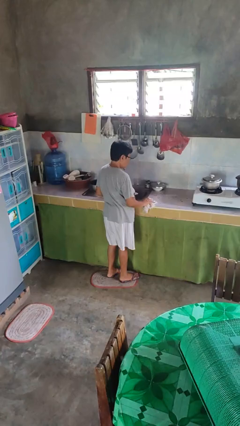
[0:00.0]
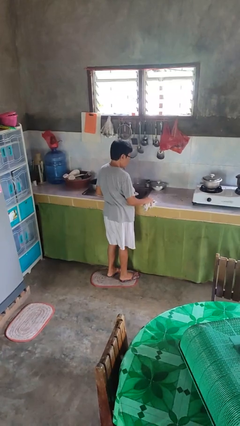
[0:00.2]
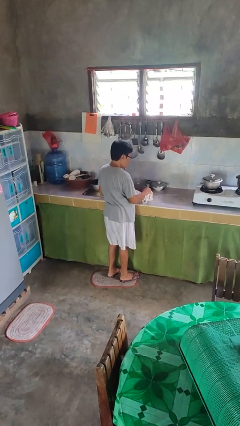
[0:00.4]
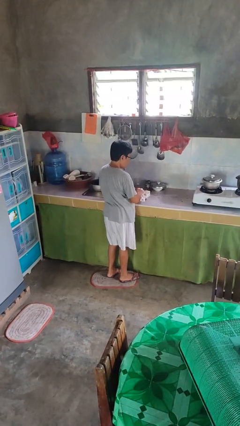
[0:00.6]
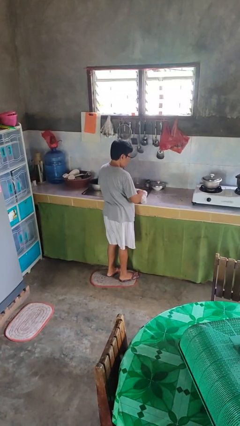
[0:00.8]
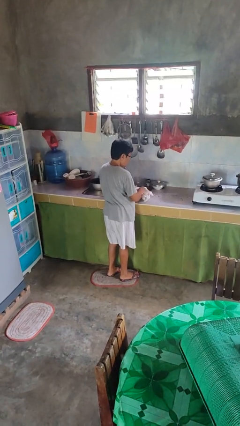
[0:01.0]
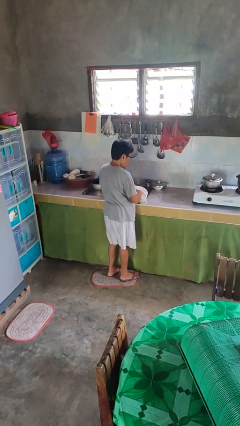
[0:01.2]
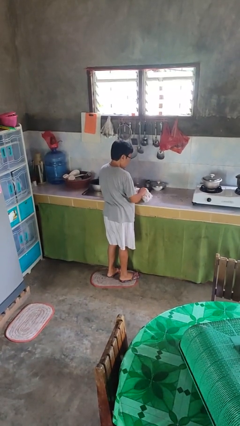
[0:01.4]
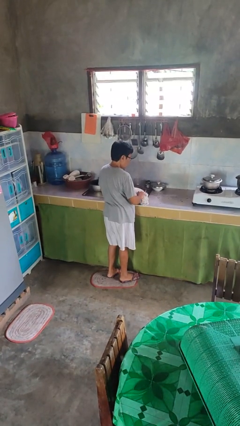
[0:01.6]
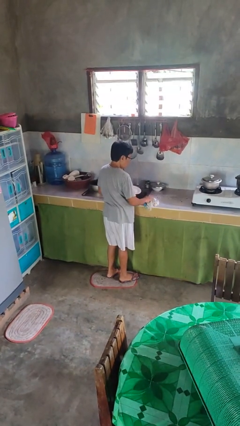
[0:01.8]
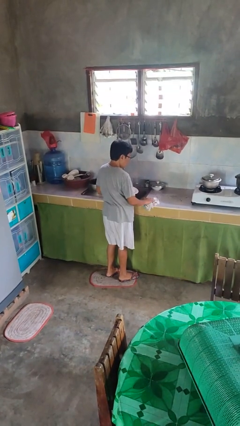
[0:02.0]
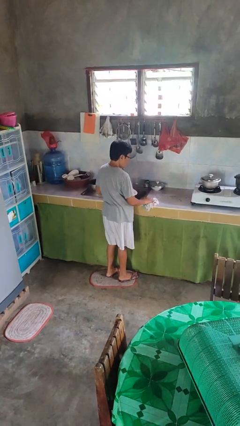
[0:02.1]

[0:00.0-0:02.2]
person dries dish

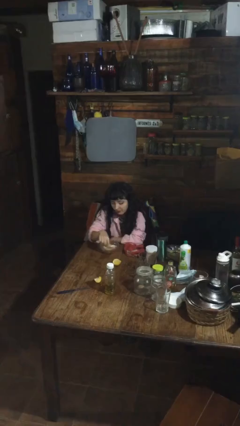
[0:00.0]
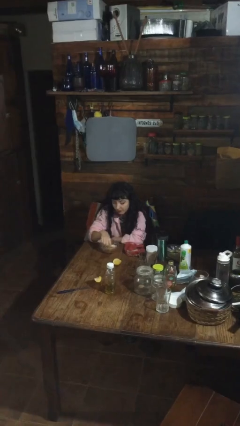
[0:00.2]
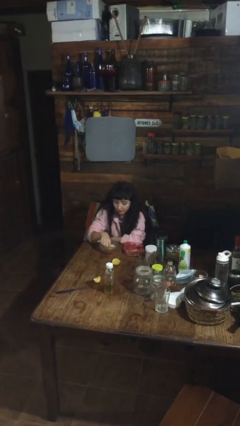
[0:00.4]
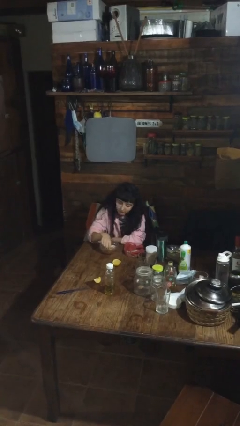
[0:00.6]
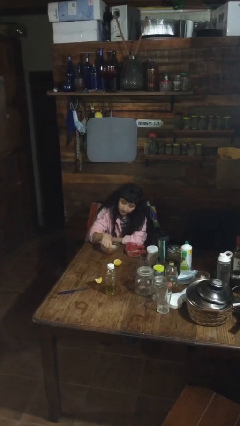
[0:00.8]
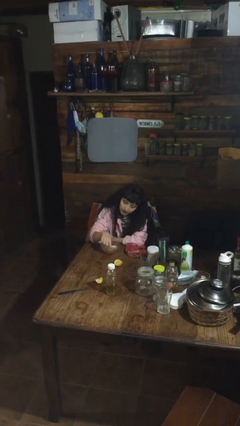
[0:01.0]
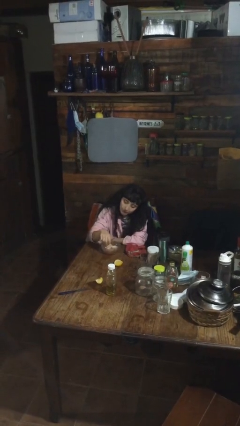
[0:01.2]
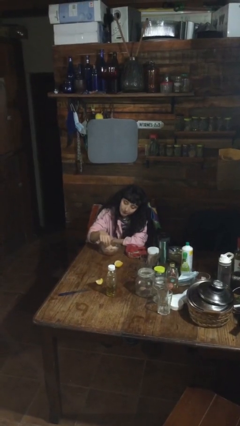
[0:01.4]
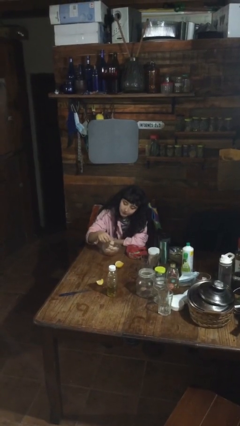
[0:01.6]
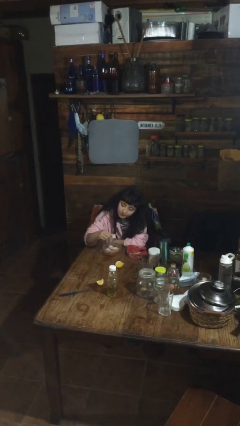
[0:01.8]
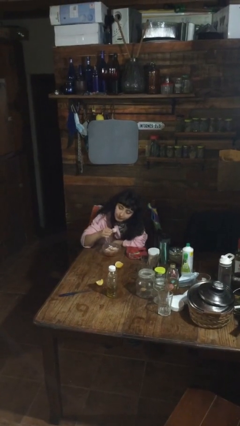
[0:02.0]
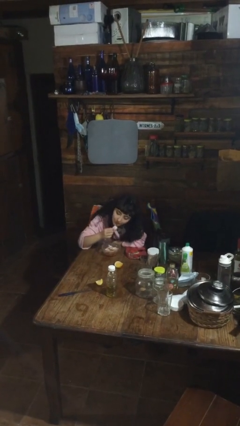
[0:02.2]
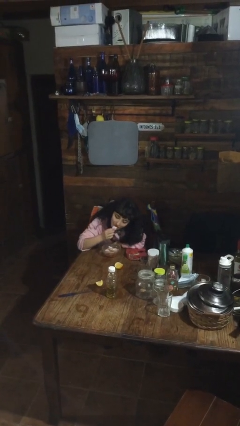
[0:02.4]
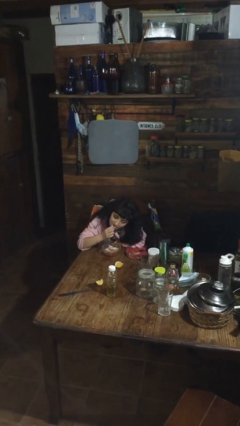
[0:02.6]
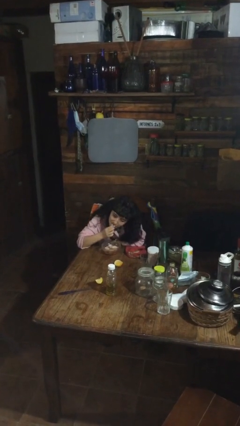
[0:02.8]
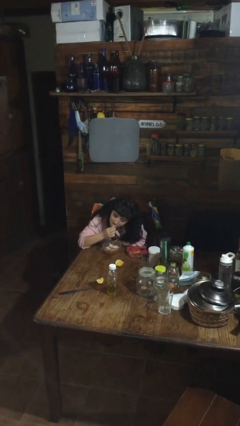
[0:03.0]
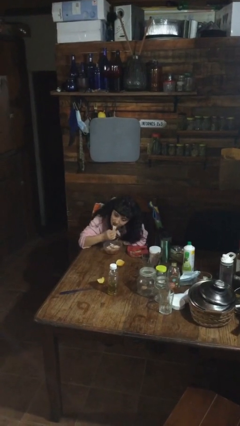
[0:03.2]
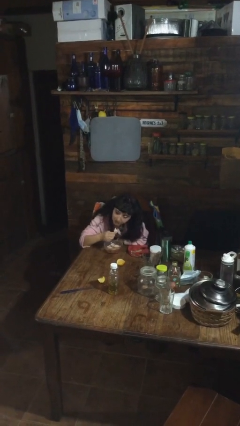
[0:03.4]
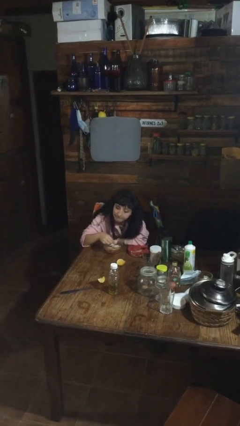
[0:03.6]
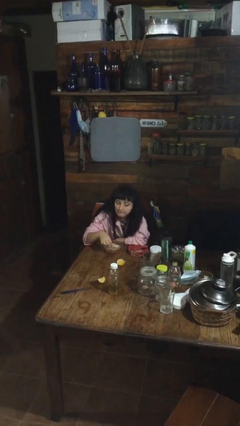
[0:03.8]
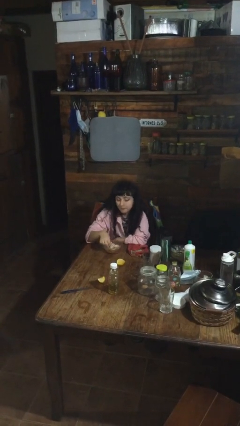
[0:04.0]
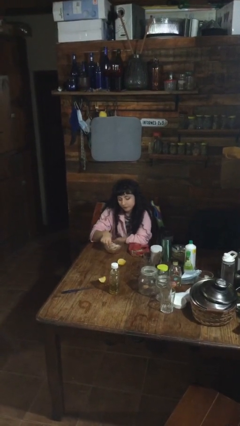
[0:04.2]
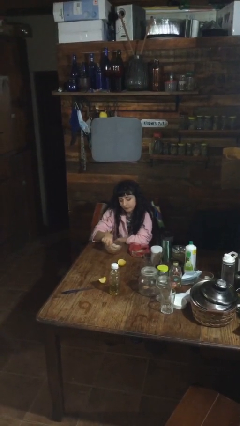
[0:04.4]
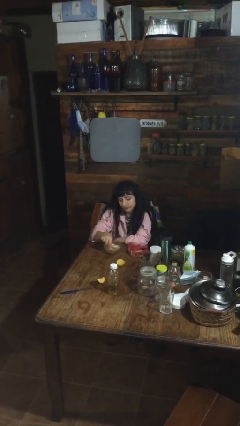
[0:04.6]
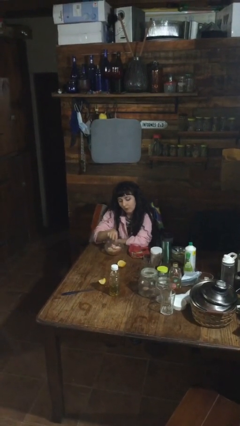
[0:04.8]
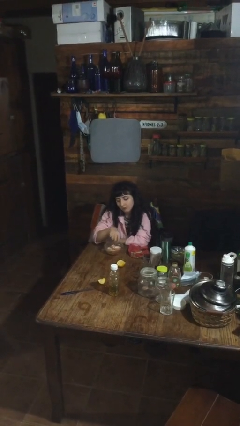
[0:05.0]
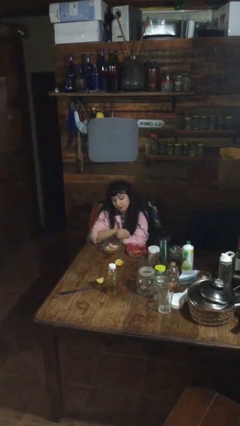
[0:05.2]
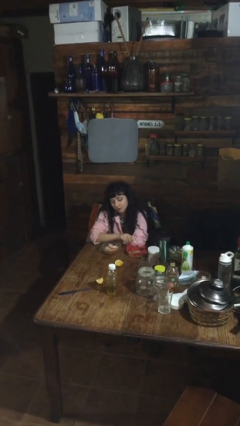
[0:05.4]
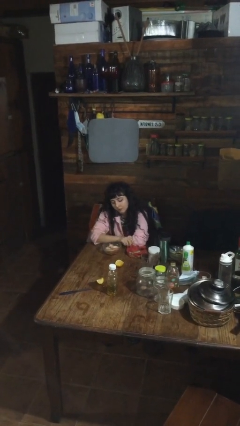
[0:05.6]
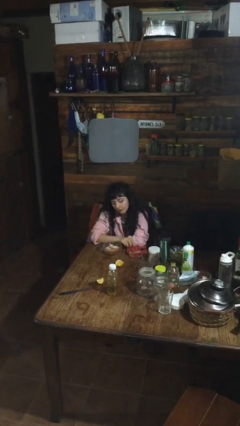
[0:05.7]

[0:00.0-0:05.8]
person eats with hands

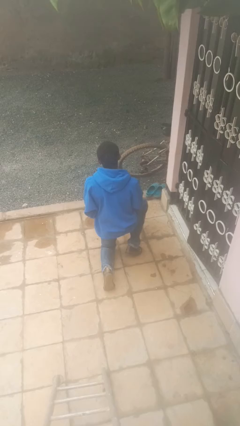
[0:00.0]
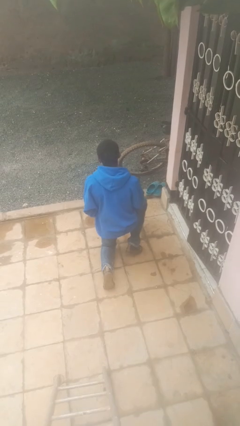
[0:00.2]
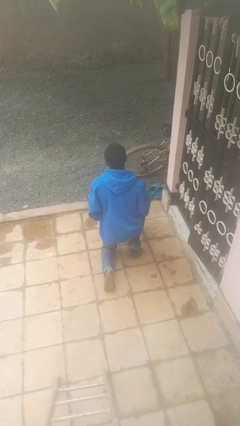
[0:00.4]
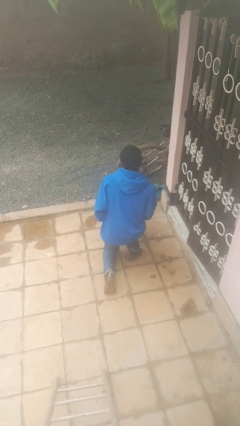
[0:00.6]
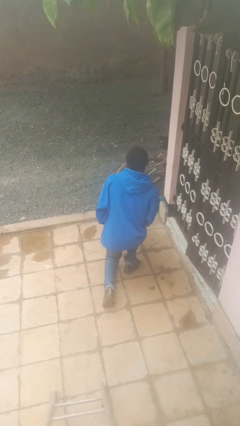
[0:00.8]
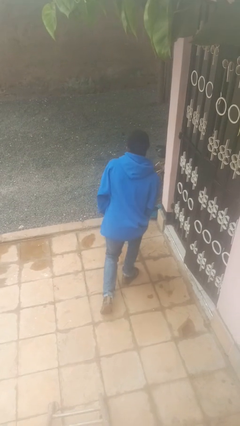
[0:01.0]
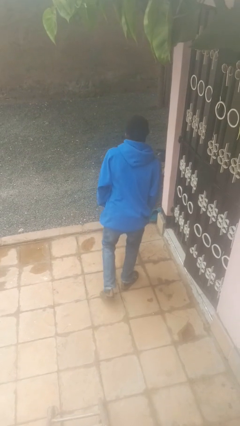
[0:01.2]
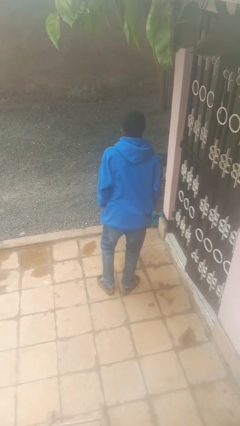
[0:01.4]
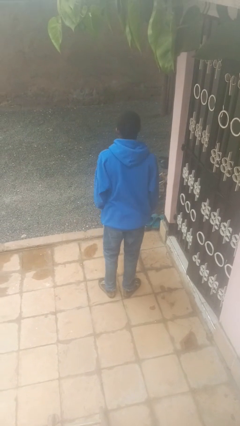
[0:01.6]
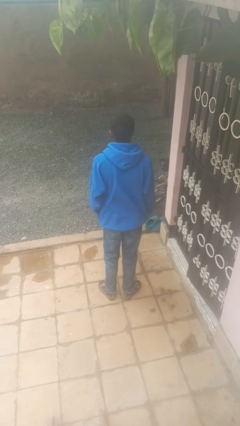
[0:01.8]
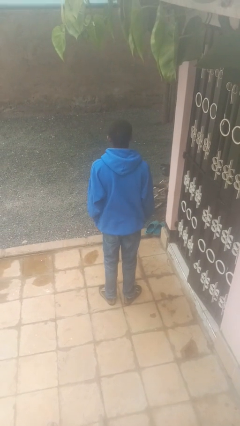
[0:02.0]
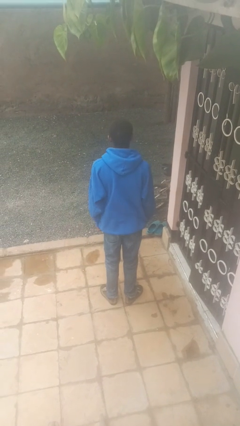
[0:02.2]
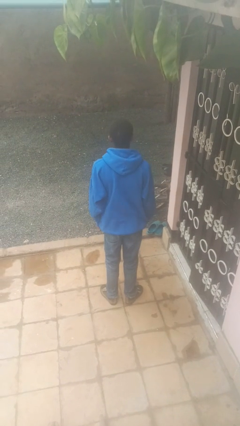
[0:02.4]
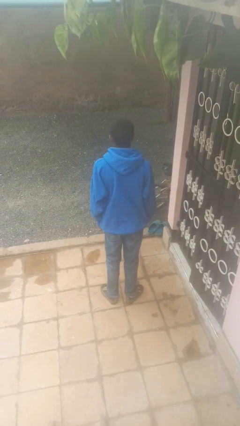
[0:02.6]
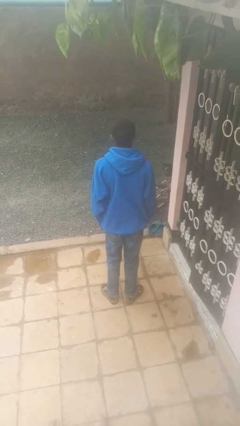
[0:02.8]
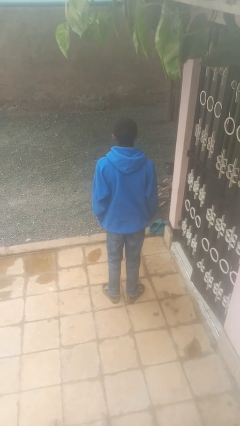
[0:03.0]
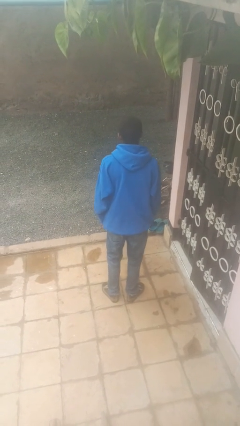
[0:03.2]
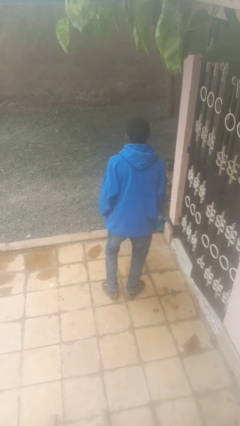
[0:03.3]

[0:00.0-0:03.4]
person stands up from floor

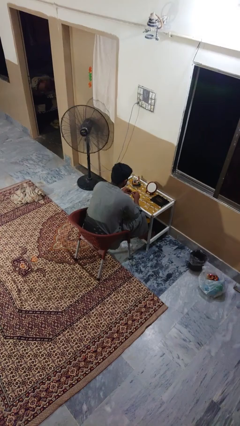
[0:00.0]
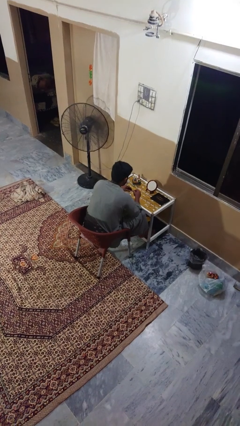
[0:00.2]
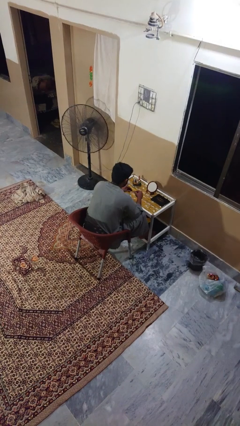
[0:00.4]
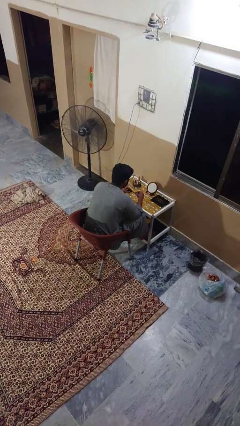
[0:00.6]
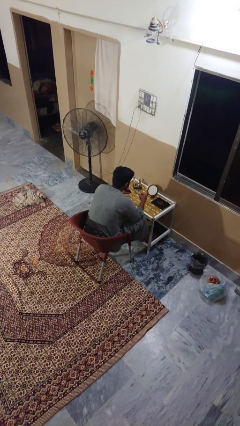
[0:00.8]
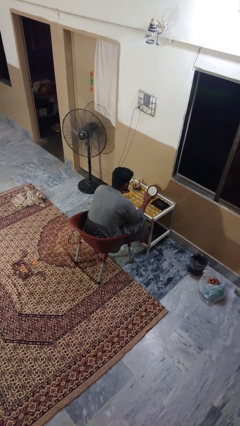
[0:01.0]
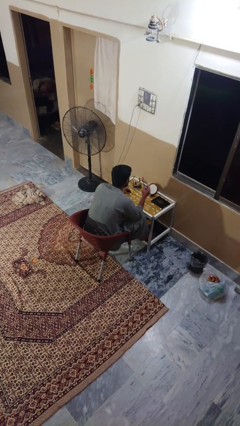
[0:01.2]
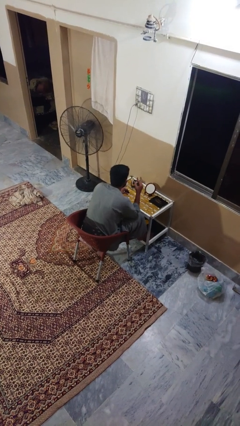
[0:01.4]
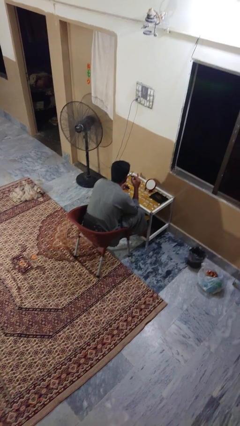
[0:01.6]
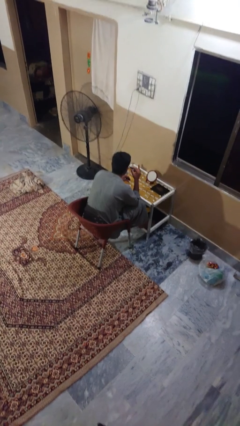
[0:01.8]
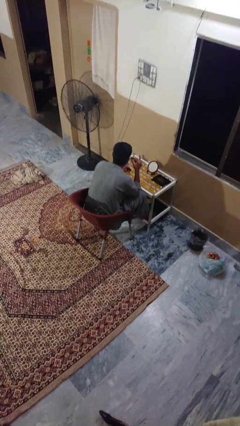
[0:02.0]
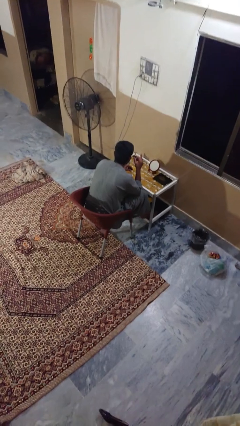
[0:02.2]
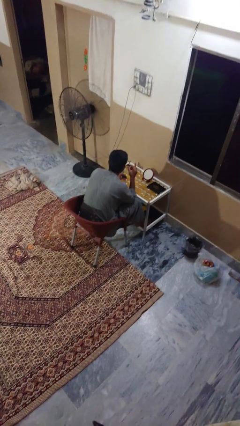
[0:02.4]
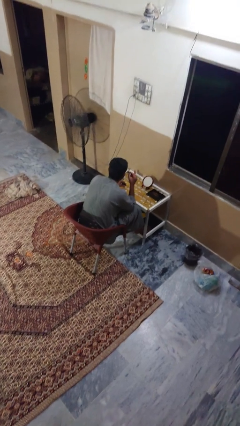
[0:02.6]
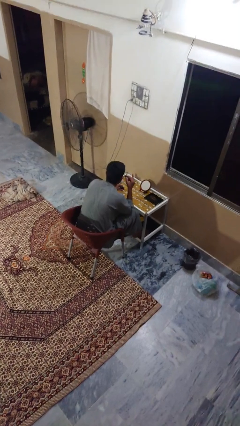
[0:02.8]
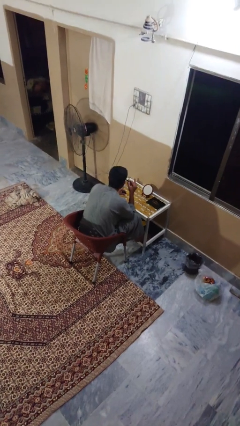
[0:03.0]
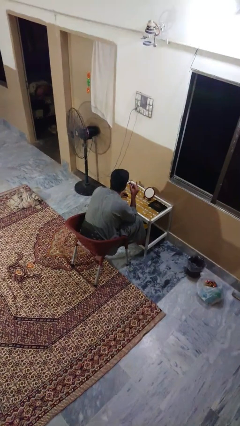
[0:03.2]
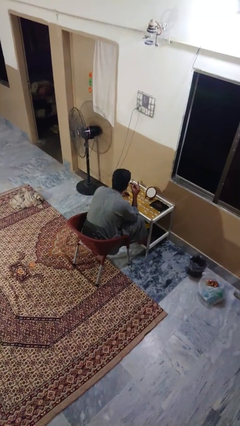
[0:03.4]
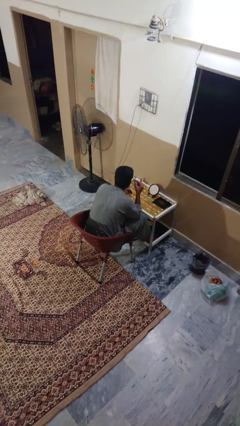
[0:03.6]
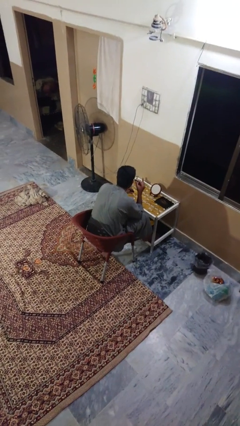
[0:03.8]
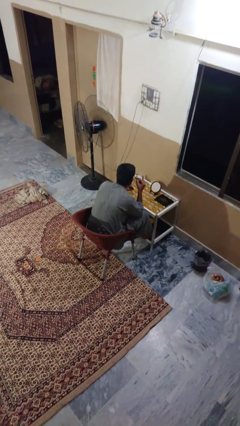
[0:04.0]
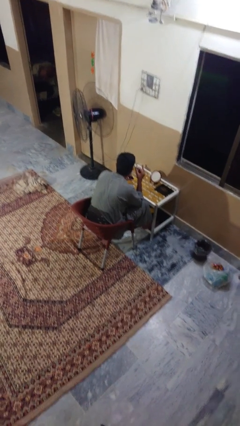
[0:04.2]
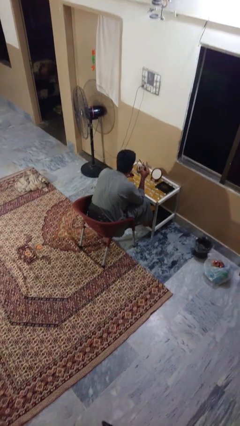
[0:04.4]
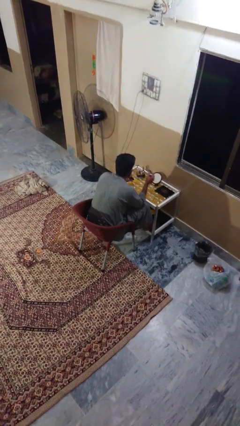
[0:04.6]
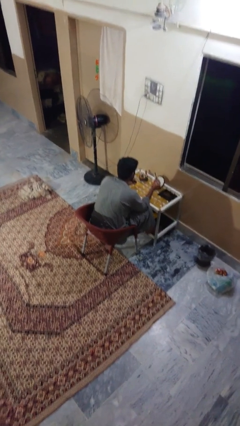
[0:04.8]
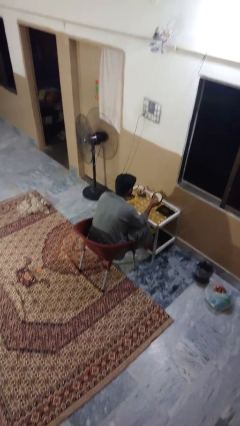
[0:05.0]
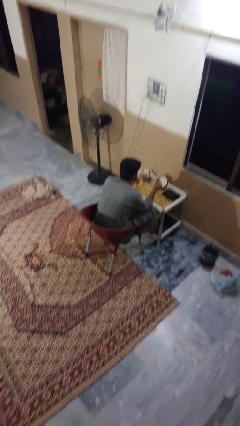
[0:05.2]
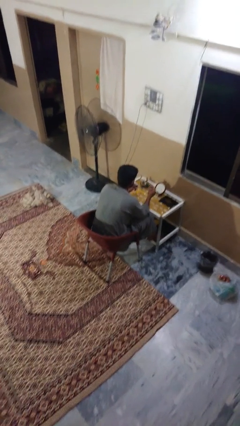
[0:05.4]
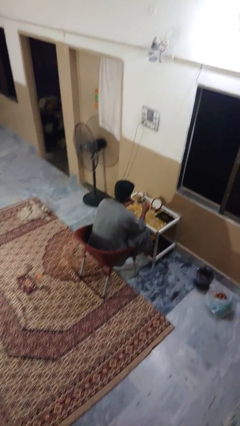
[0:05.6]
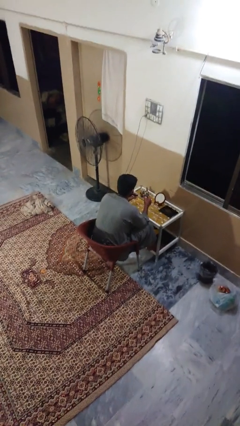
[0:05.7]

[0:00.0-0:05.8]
person applies eye makeup

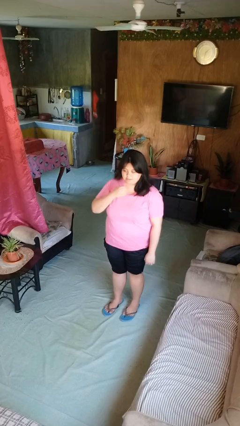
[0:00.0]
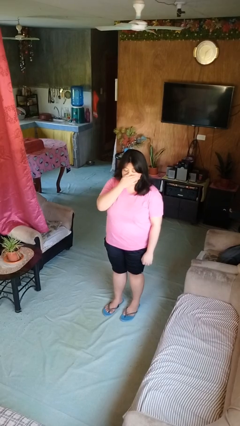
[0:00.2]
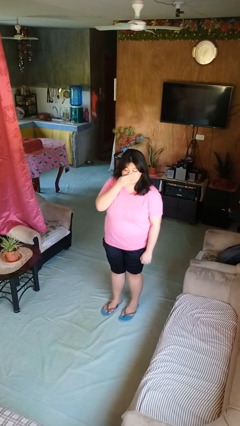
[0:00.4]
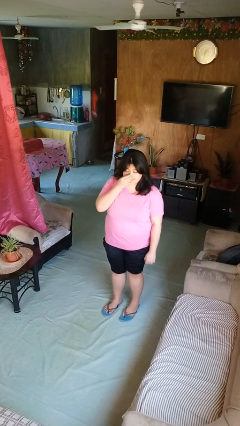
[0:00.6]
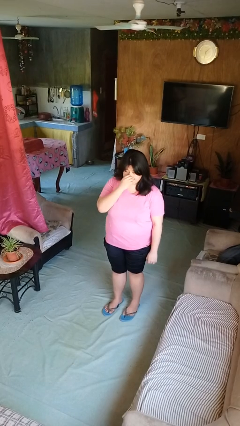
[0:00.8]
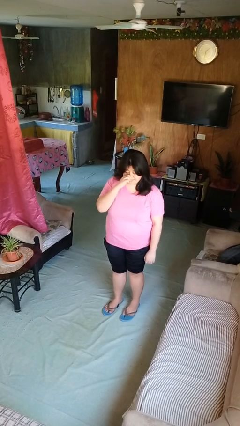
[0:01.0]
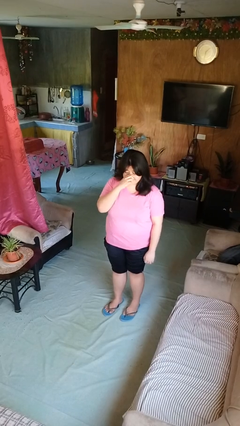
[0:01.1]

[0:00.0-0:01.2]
person scratches face
